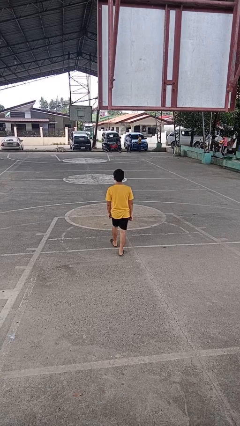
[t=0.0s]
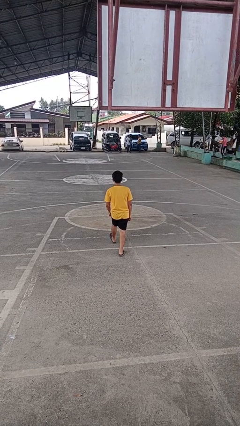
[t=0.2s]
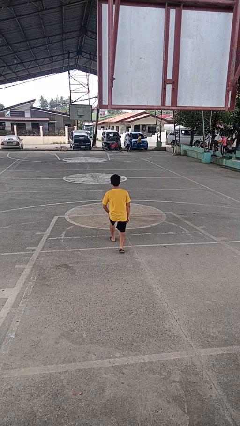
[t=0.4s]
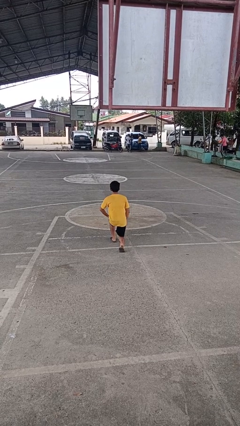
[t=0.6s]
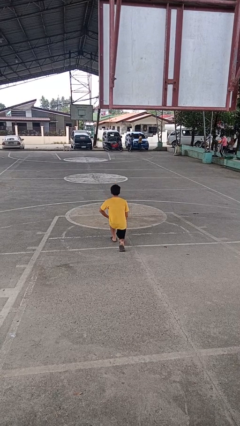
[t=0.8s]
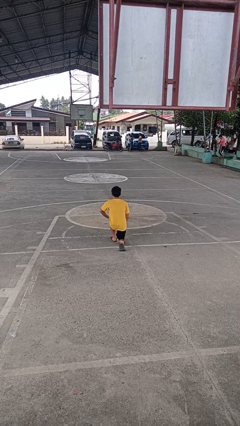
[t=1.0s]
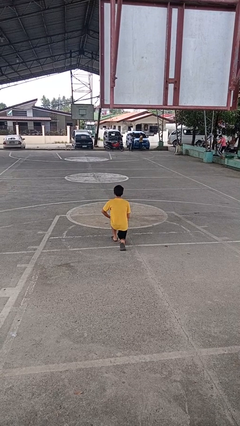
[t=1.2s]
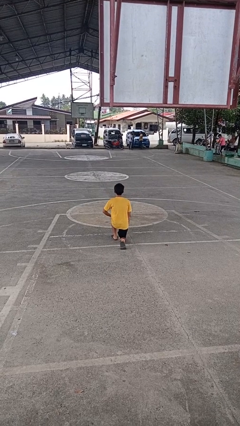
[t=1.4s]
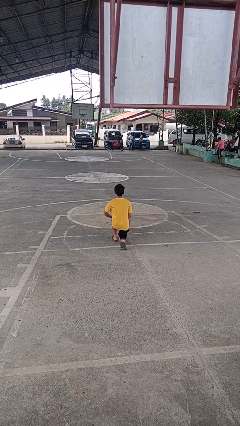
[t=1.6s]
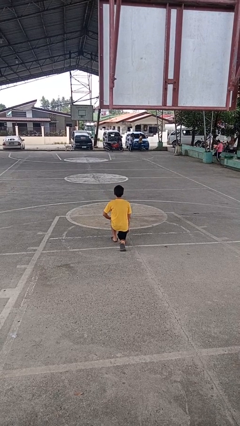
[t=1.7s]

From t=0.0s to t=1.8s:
person kneels

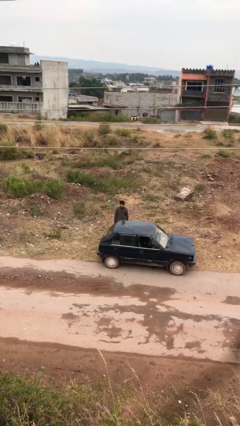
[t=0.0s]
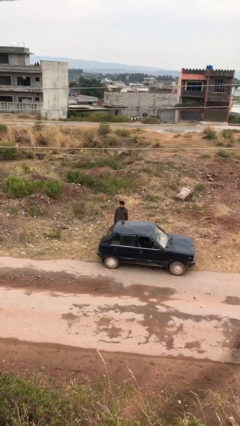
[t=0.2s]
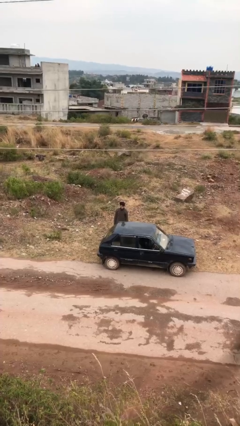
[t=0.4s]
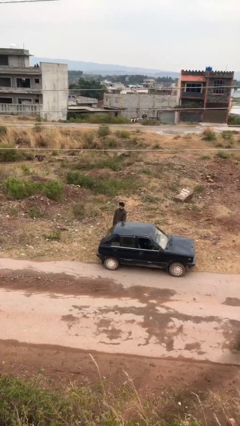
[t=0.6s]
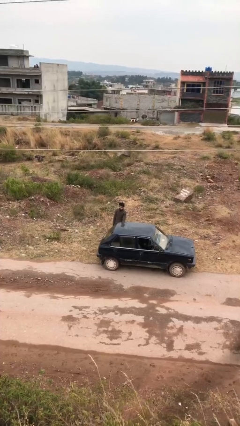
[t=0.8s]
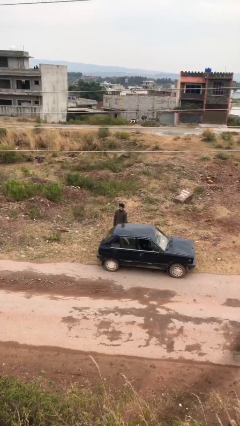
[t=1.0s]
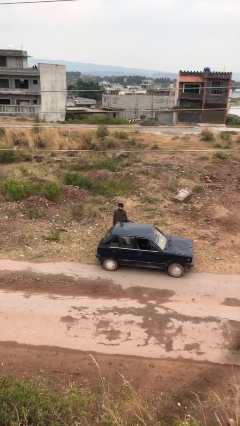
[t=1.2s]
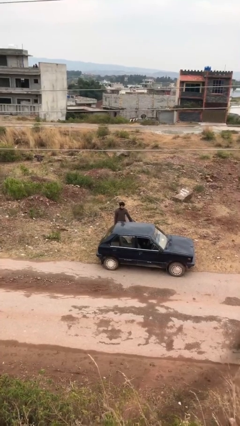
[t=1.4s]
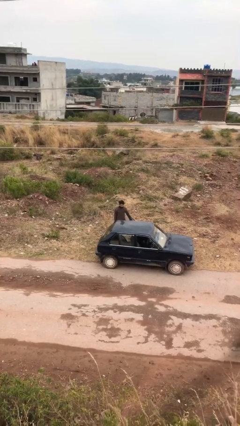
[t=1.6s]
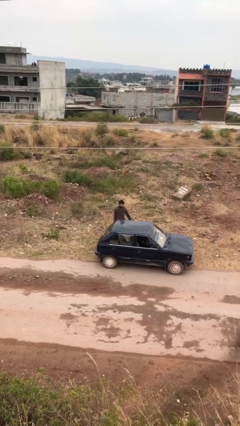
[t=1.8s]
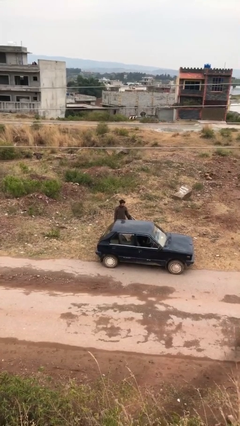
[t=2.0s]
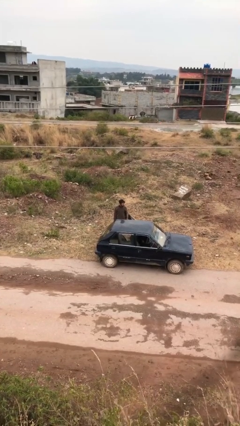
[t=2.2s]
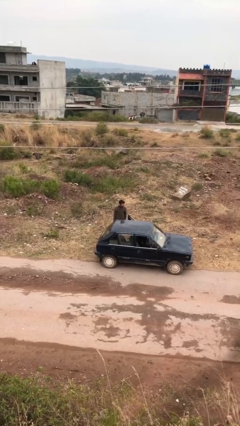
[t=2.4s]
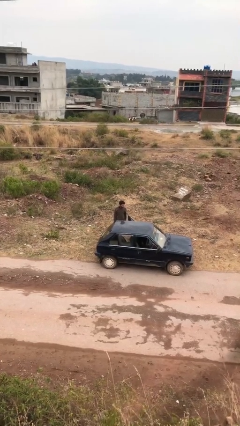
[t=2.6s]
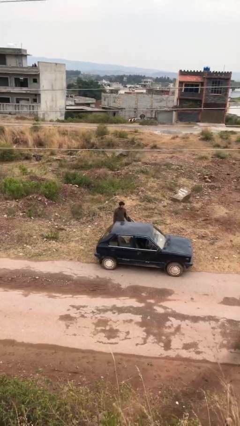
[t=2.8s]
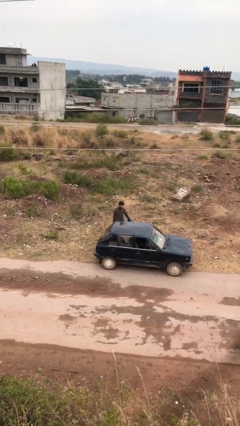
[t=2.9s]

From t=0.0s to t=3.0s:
person opens car door

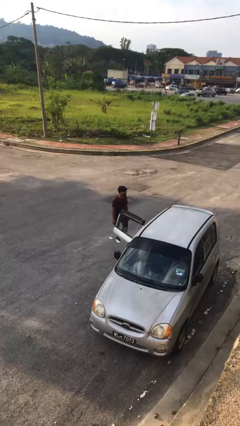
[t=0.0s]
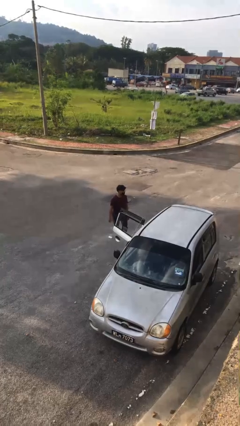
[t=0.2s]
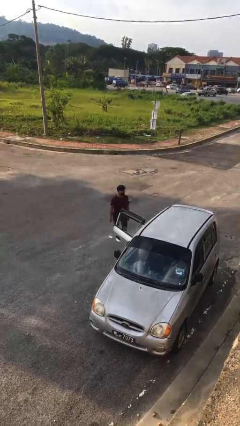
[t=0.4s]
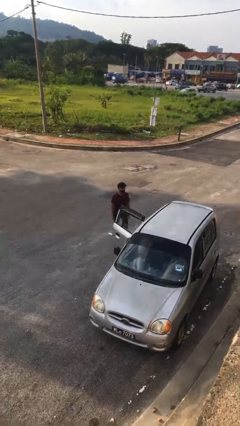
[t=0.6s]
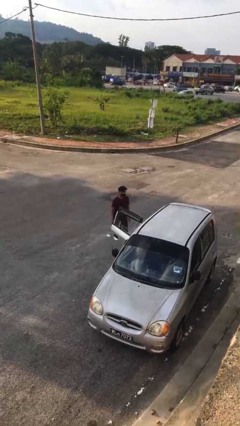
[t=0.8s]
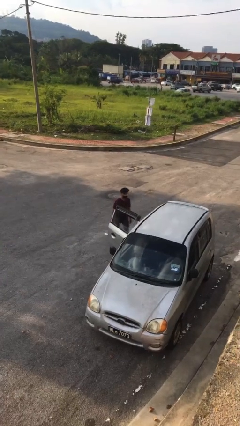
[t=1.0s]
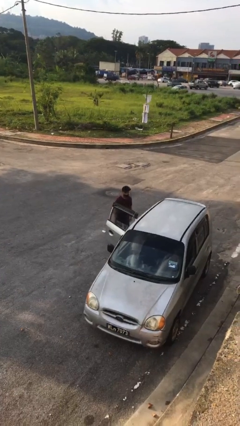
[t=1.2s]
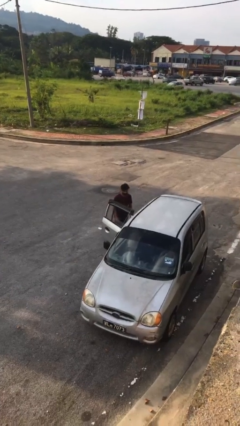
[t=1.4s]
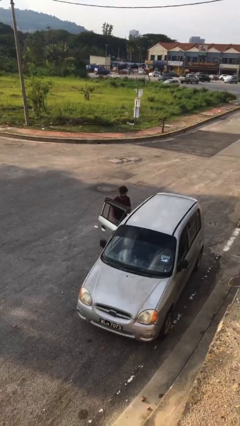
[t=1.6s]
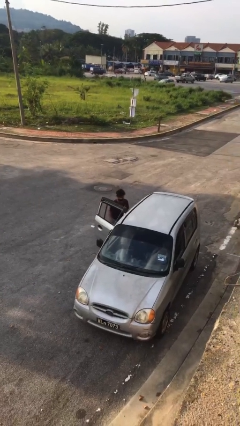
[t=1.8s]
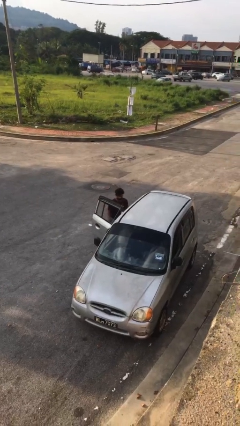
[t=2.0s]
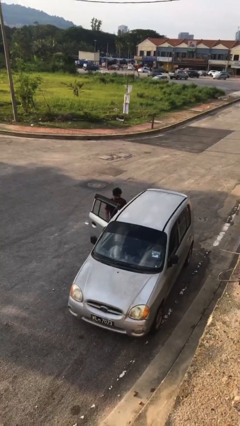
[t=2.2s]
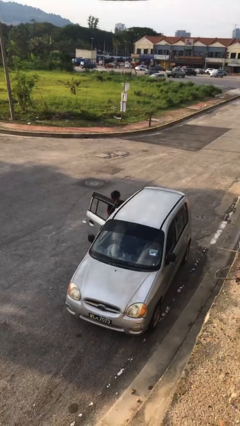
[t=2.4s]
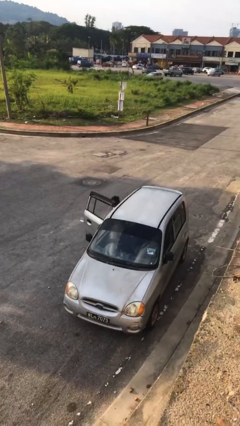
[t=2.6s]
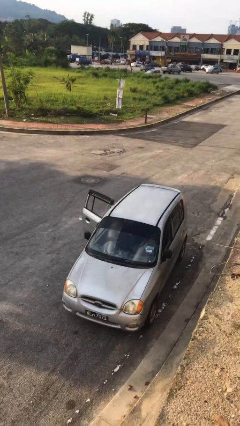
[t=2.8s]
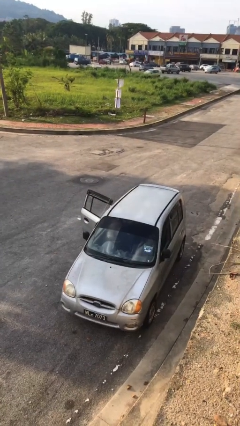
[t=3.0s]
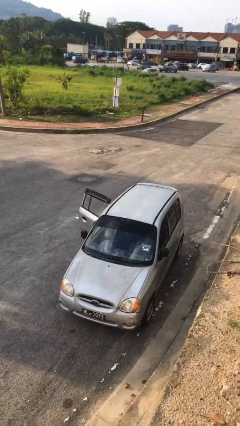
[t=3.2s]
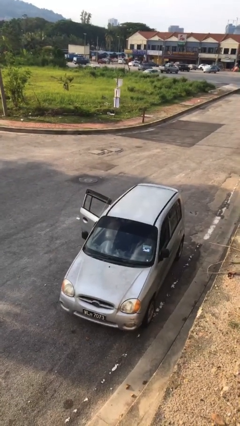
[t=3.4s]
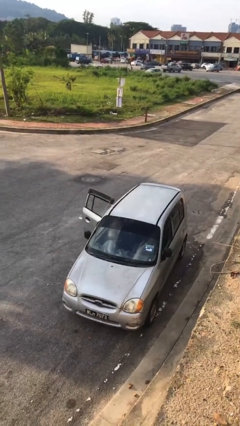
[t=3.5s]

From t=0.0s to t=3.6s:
person enters car

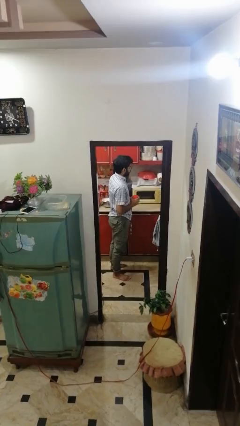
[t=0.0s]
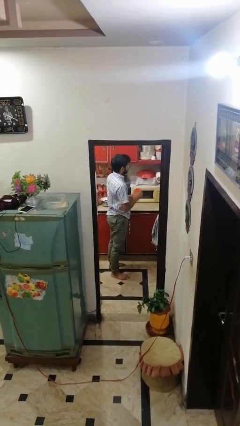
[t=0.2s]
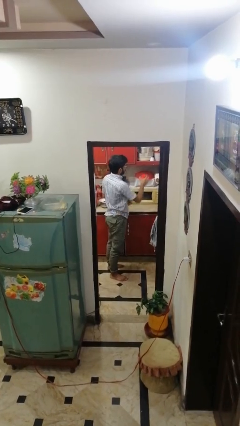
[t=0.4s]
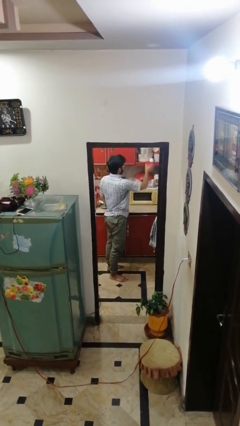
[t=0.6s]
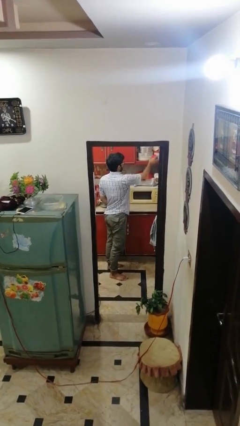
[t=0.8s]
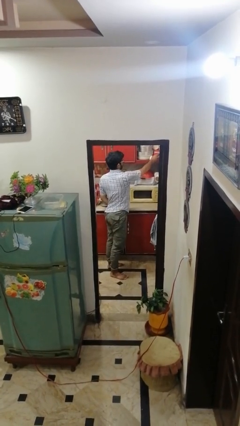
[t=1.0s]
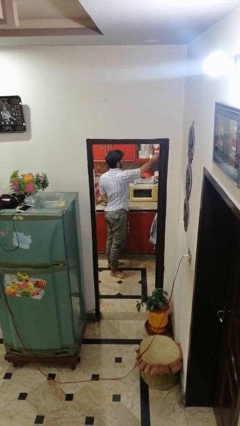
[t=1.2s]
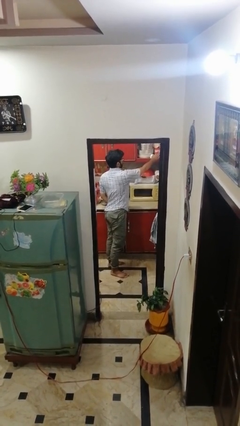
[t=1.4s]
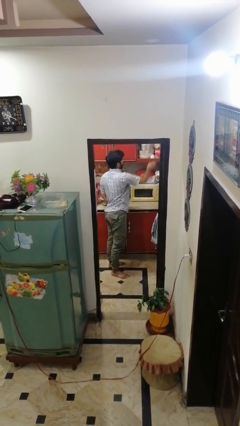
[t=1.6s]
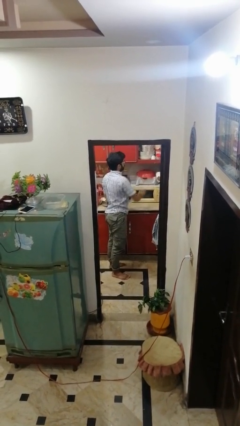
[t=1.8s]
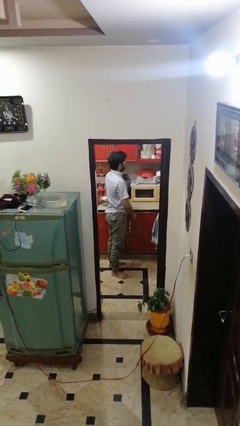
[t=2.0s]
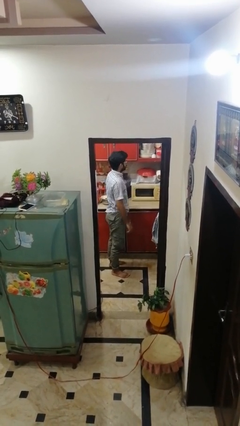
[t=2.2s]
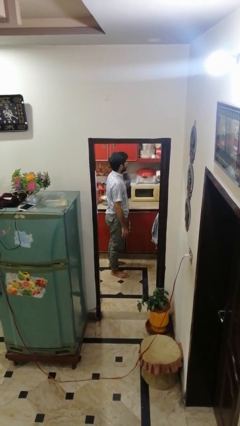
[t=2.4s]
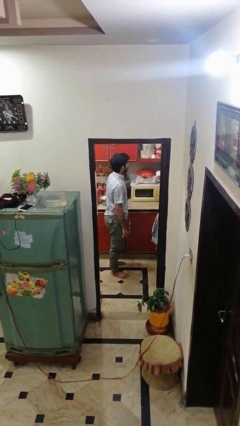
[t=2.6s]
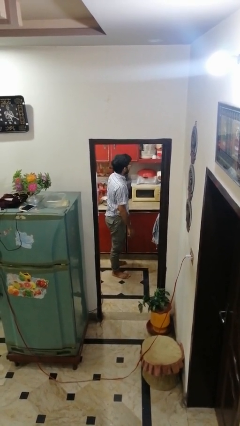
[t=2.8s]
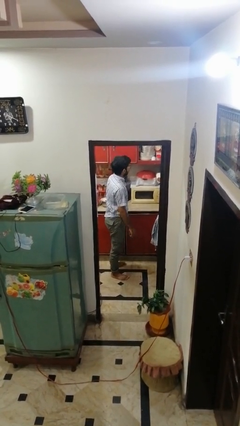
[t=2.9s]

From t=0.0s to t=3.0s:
person puts down object into cabinet

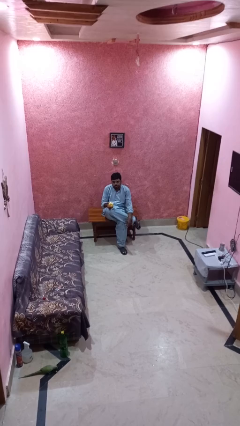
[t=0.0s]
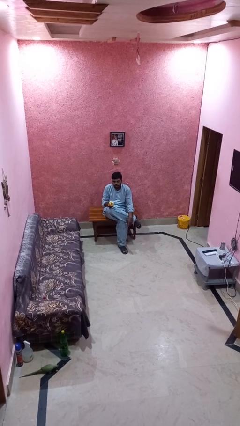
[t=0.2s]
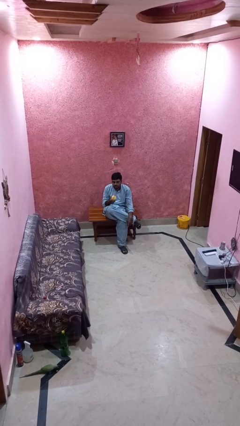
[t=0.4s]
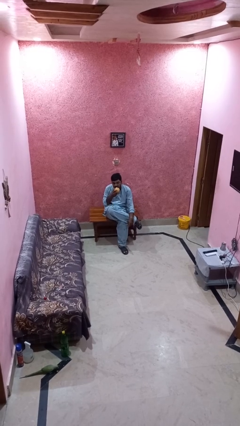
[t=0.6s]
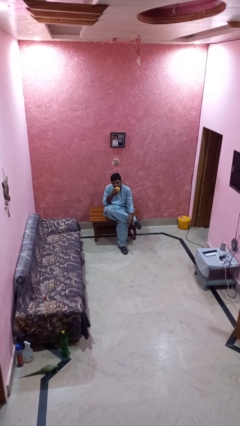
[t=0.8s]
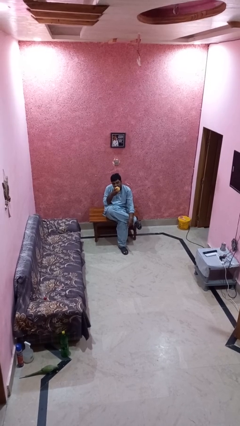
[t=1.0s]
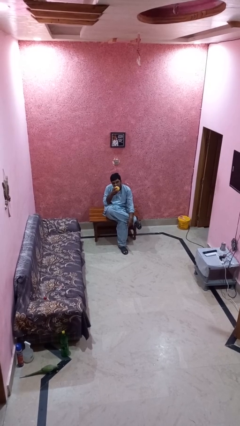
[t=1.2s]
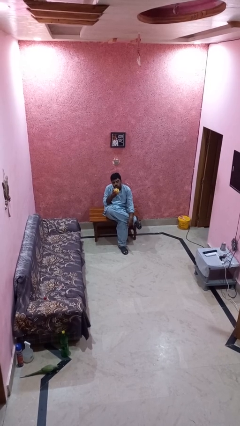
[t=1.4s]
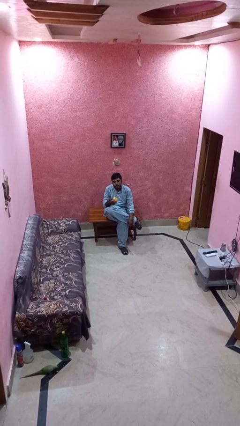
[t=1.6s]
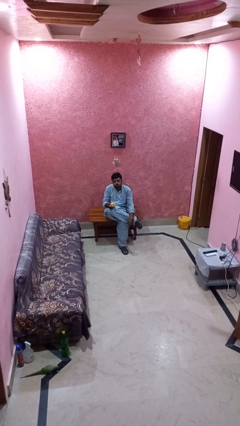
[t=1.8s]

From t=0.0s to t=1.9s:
person eats apple

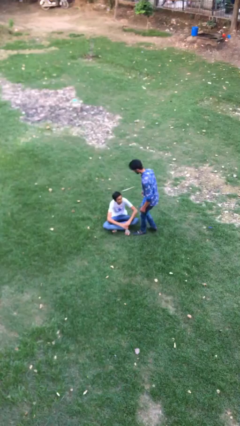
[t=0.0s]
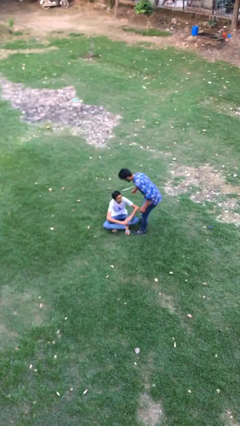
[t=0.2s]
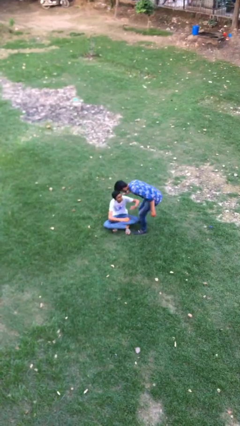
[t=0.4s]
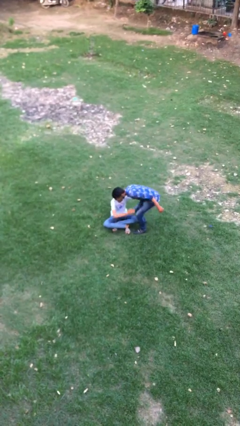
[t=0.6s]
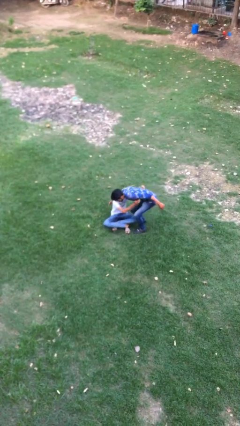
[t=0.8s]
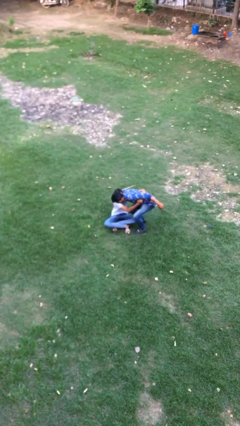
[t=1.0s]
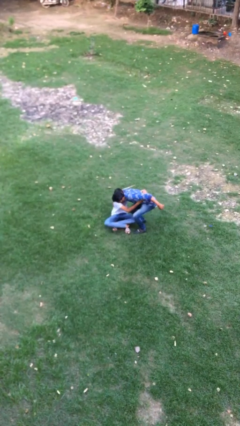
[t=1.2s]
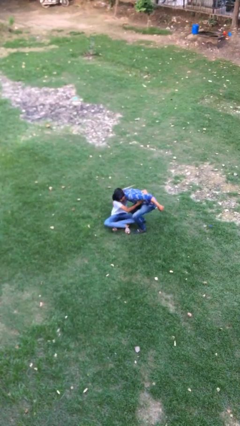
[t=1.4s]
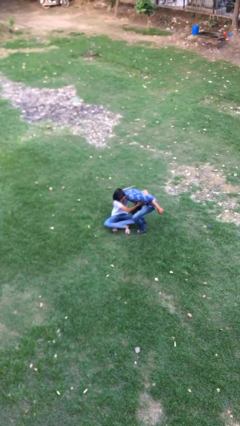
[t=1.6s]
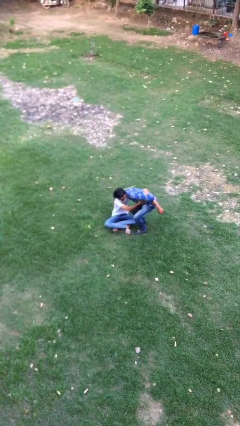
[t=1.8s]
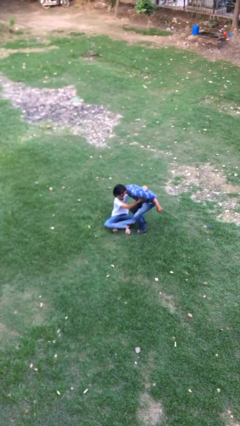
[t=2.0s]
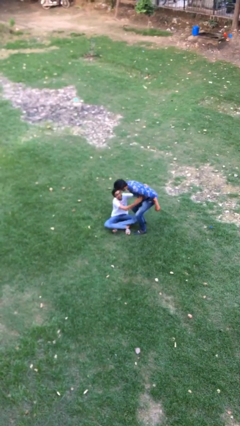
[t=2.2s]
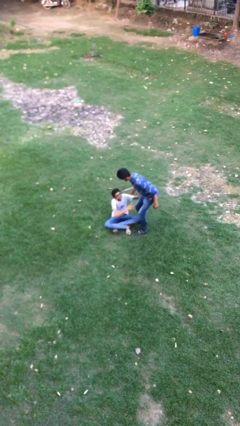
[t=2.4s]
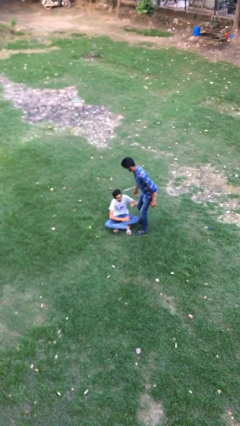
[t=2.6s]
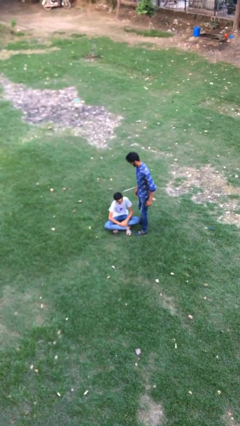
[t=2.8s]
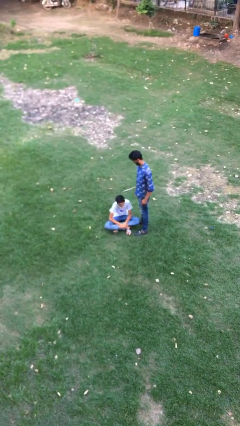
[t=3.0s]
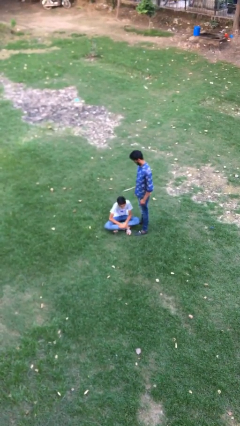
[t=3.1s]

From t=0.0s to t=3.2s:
person embraces person

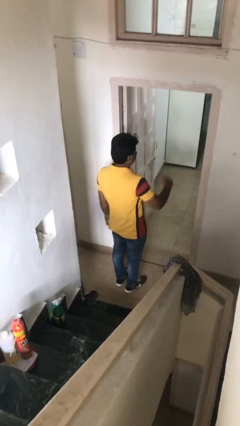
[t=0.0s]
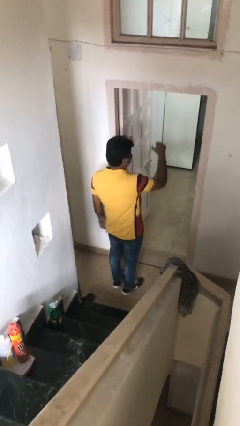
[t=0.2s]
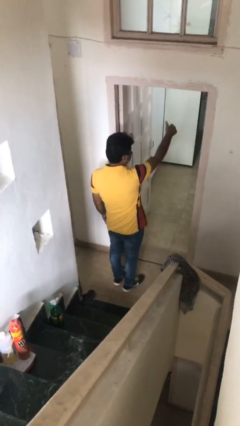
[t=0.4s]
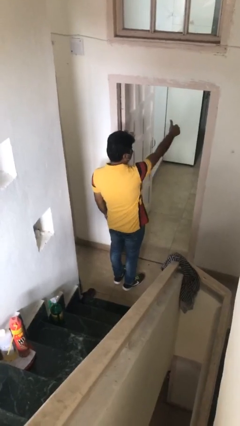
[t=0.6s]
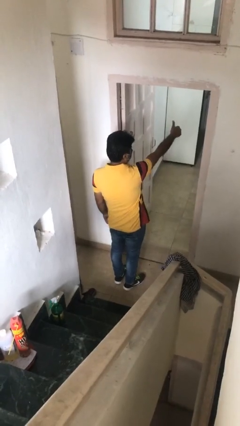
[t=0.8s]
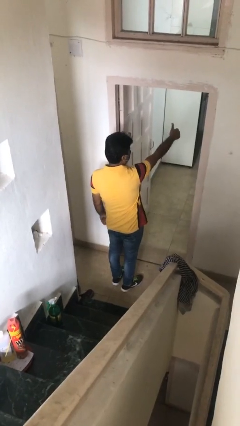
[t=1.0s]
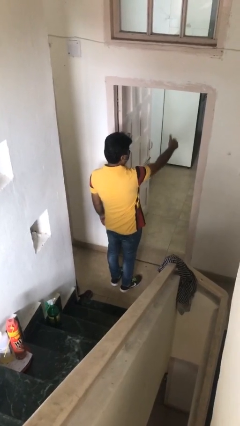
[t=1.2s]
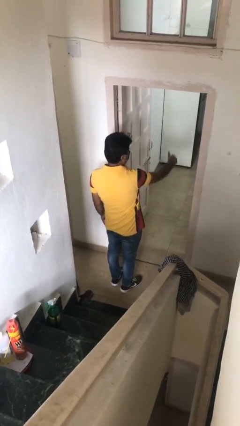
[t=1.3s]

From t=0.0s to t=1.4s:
person gestures thumbs up
